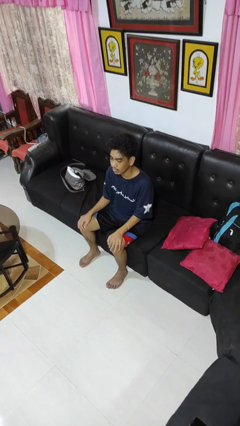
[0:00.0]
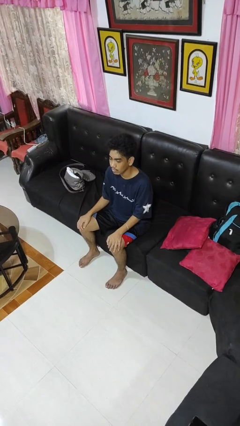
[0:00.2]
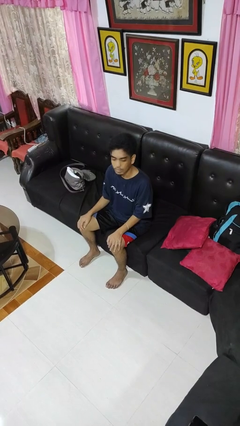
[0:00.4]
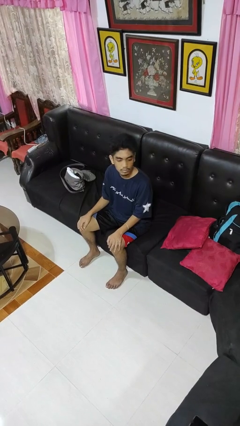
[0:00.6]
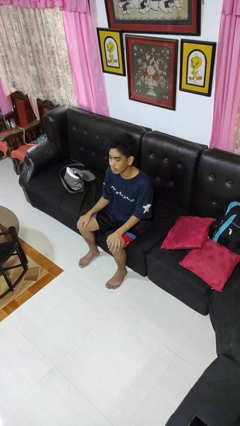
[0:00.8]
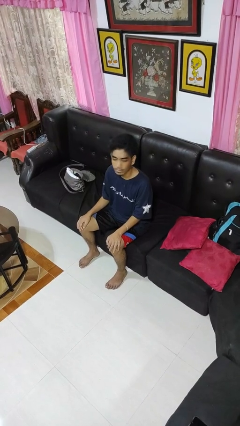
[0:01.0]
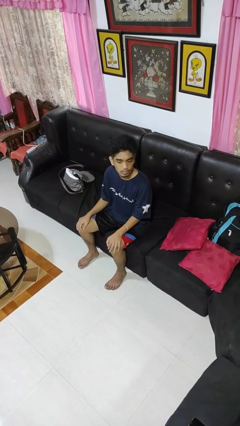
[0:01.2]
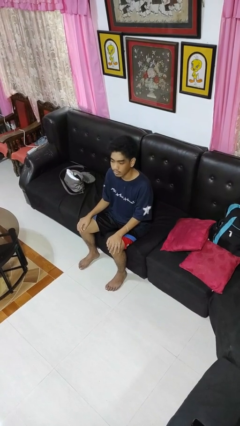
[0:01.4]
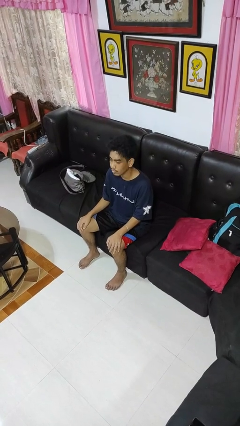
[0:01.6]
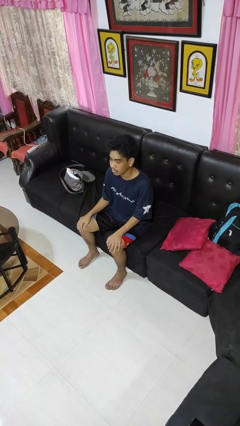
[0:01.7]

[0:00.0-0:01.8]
person shakes head

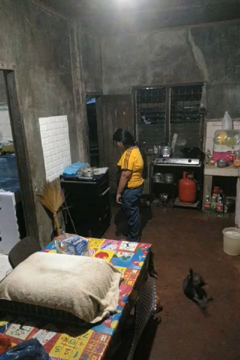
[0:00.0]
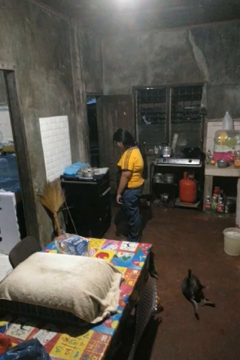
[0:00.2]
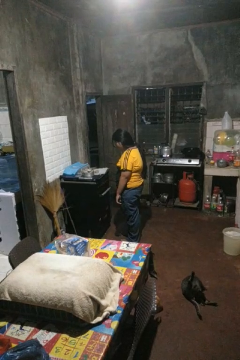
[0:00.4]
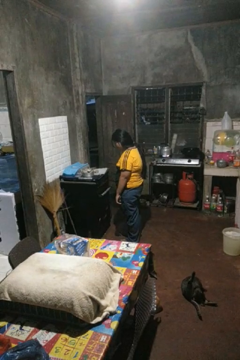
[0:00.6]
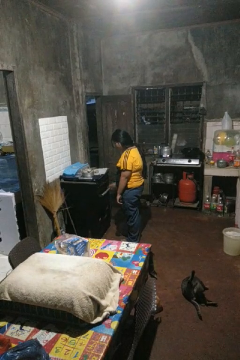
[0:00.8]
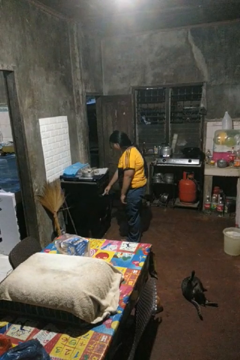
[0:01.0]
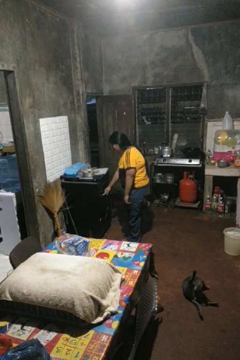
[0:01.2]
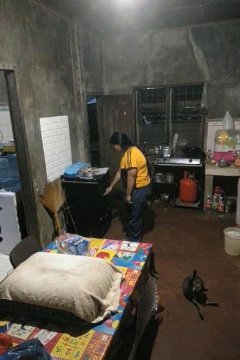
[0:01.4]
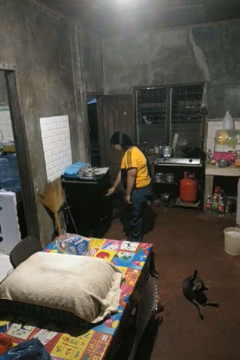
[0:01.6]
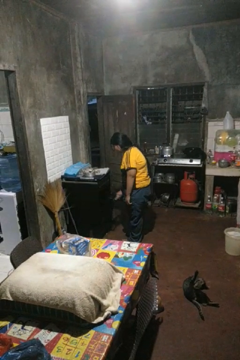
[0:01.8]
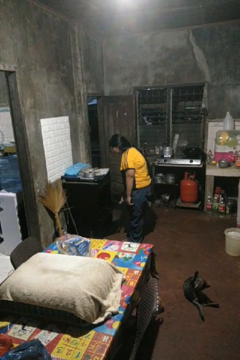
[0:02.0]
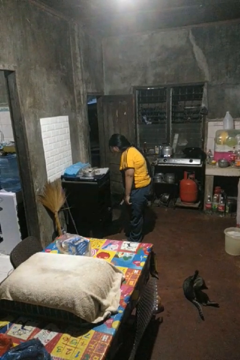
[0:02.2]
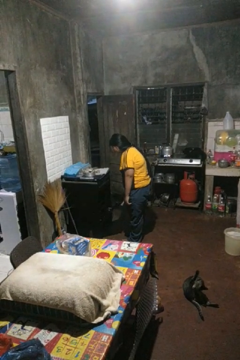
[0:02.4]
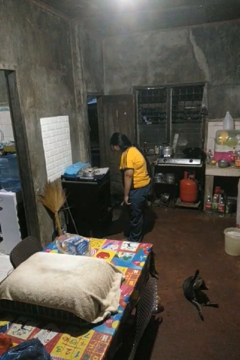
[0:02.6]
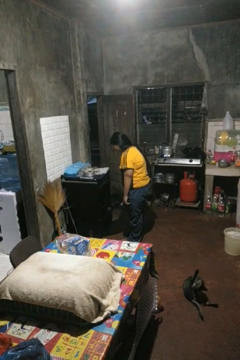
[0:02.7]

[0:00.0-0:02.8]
person opens oven door

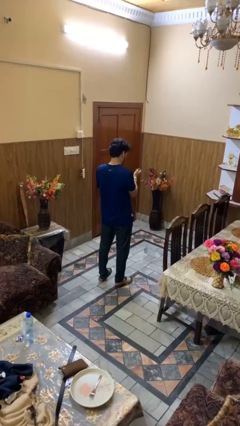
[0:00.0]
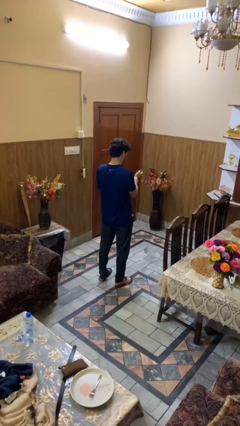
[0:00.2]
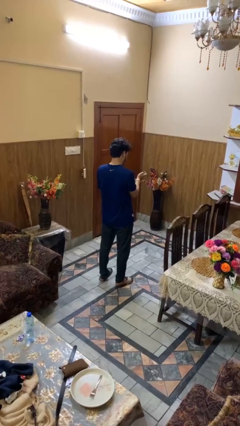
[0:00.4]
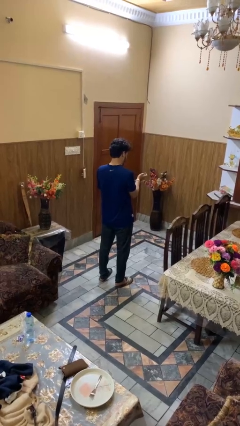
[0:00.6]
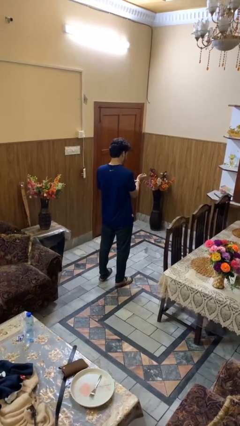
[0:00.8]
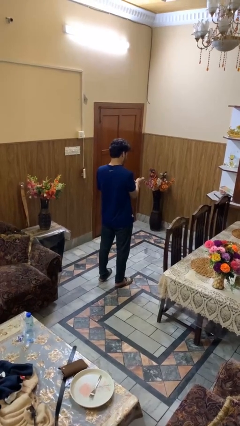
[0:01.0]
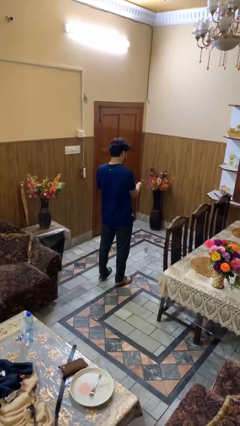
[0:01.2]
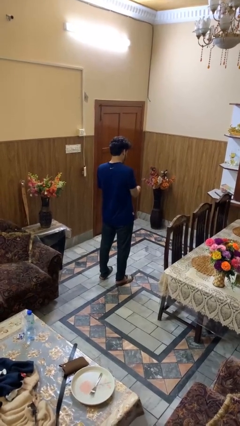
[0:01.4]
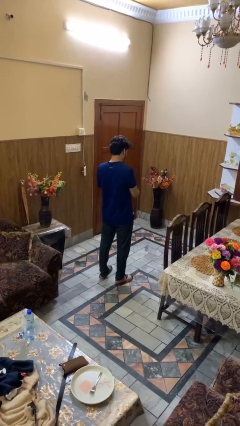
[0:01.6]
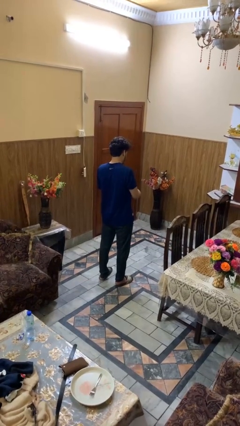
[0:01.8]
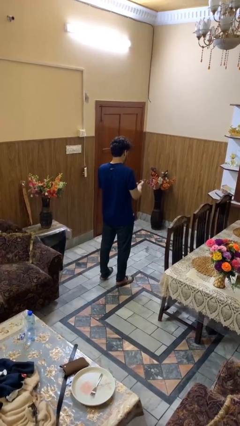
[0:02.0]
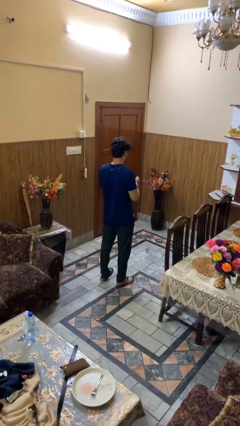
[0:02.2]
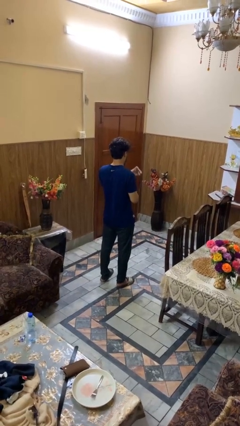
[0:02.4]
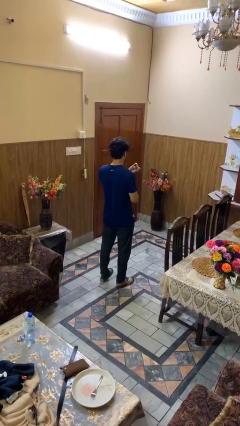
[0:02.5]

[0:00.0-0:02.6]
person takes off wristwatch

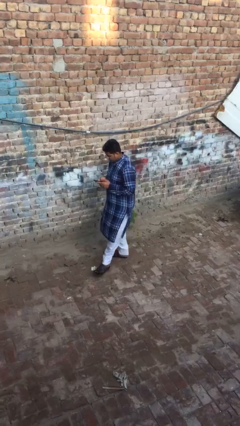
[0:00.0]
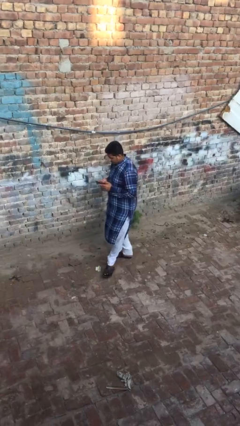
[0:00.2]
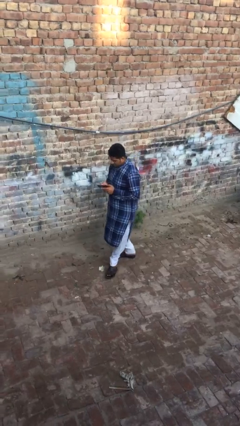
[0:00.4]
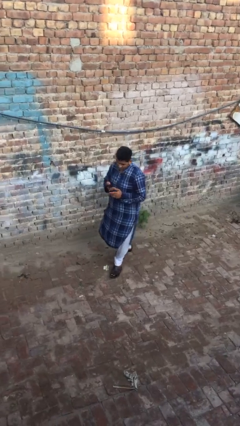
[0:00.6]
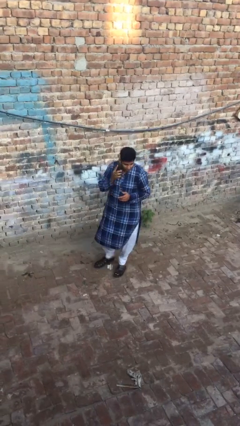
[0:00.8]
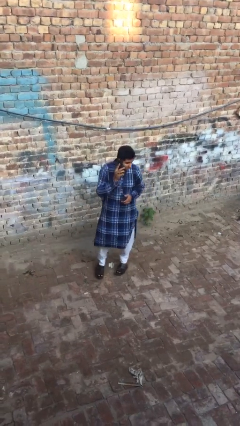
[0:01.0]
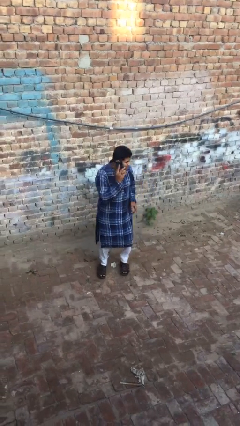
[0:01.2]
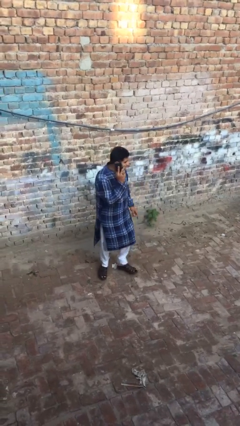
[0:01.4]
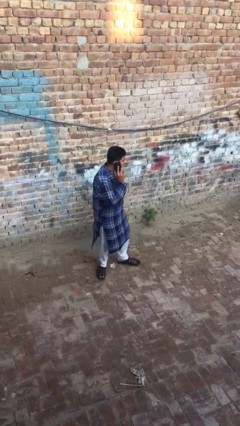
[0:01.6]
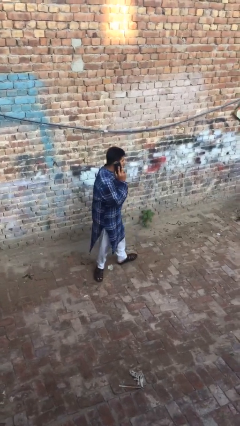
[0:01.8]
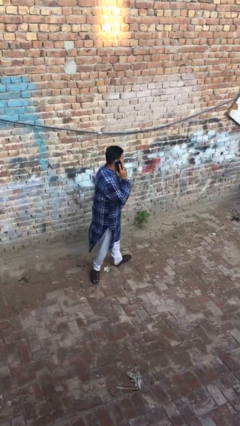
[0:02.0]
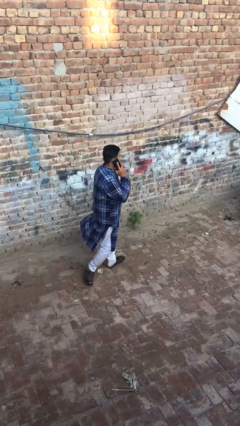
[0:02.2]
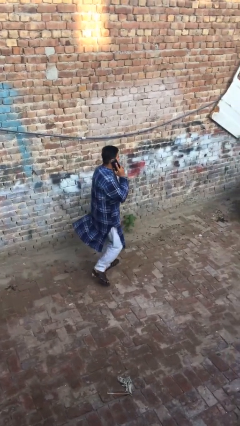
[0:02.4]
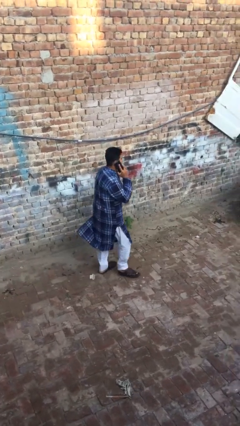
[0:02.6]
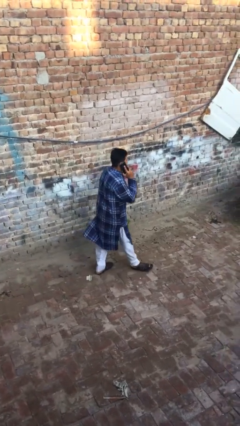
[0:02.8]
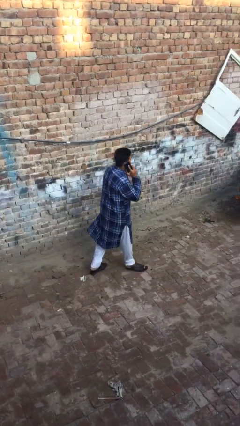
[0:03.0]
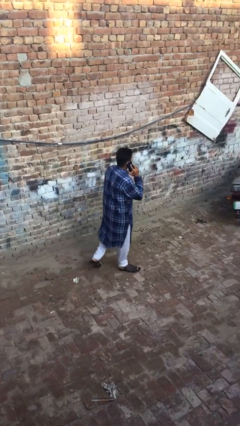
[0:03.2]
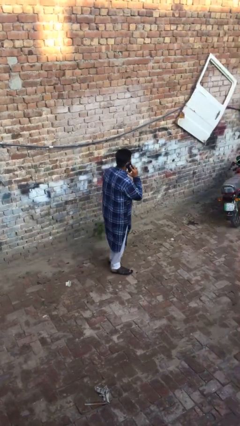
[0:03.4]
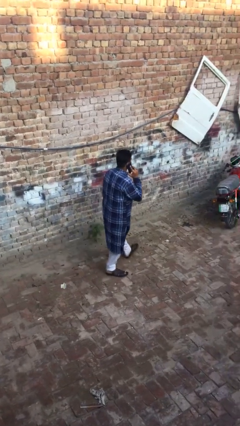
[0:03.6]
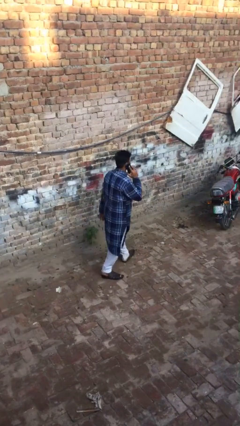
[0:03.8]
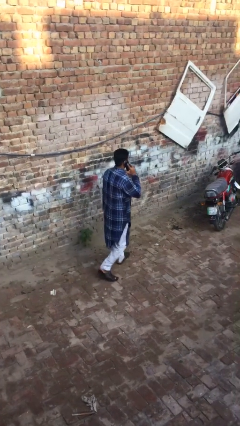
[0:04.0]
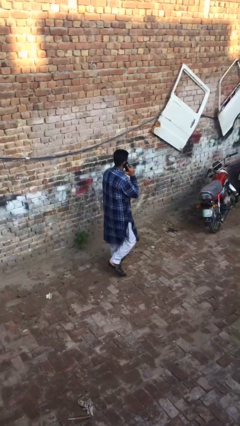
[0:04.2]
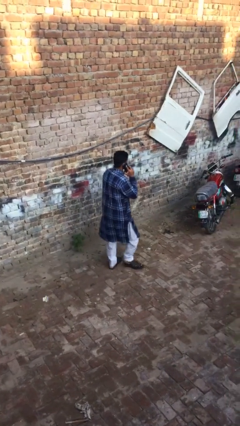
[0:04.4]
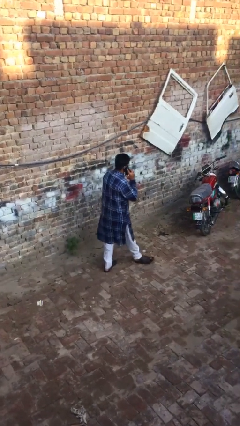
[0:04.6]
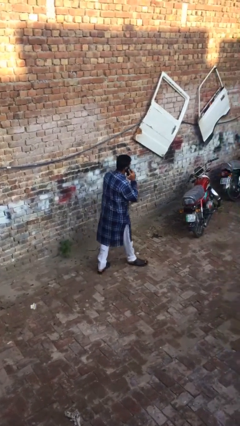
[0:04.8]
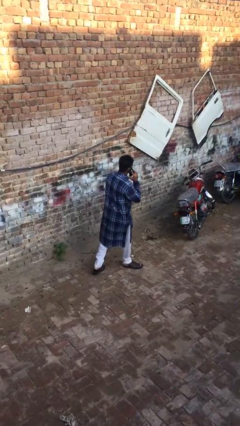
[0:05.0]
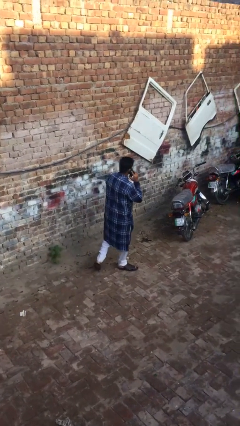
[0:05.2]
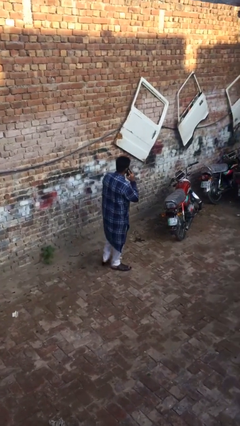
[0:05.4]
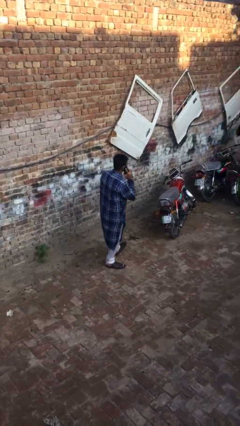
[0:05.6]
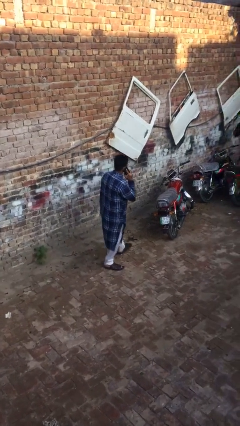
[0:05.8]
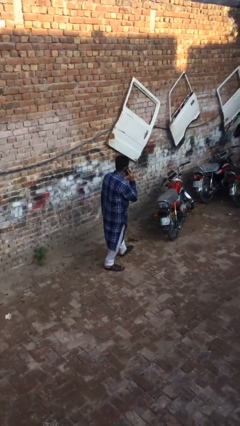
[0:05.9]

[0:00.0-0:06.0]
person talks on phone

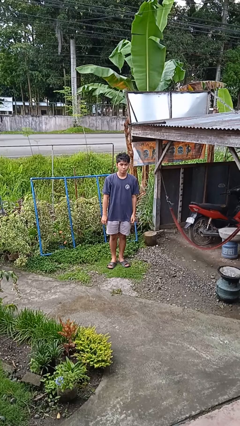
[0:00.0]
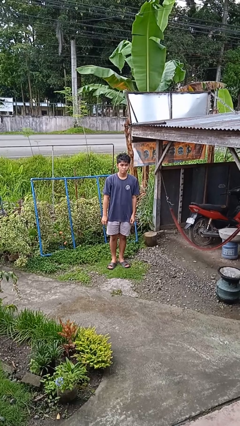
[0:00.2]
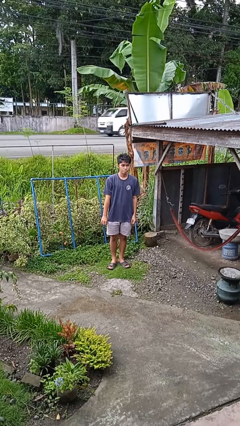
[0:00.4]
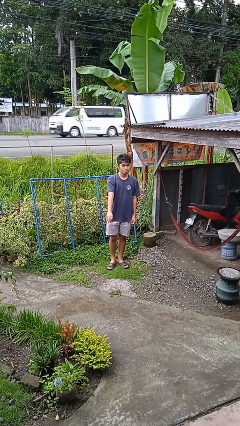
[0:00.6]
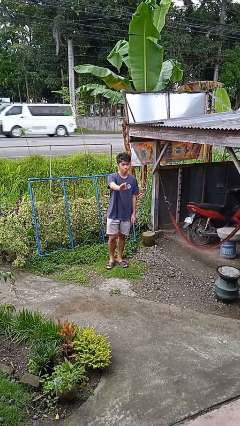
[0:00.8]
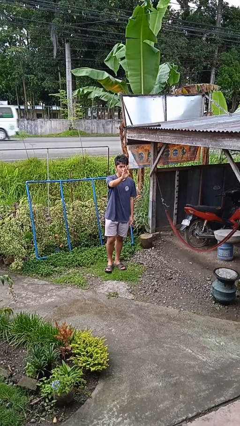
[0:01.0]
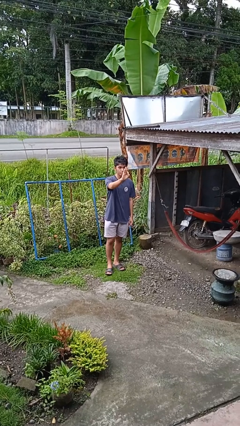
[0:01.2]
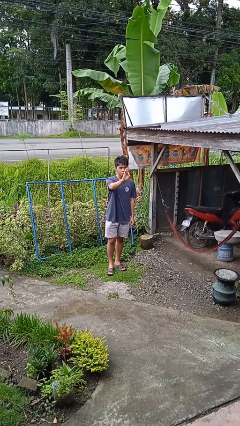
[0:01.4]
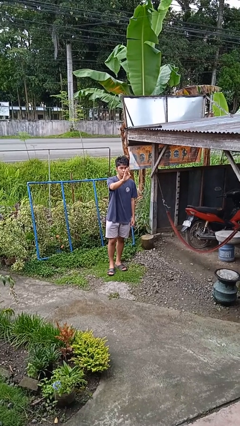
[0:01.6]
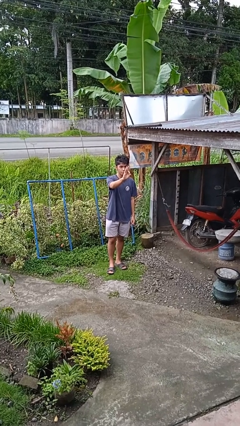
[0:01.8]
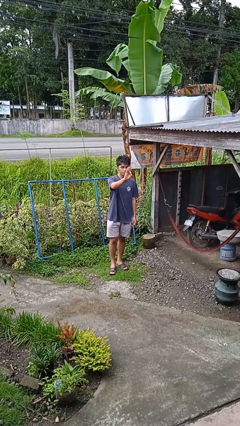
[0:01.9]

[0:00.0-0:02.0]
person gestures number three

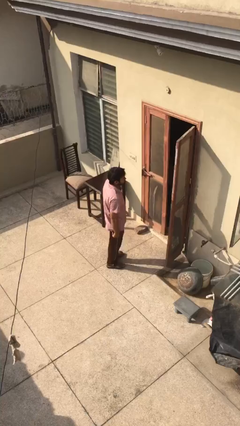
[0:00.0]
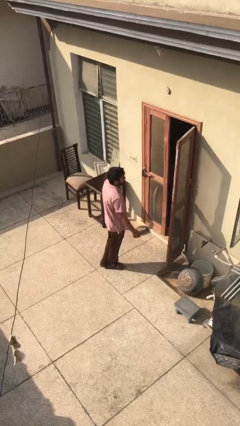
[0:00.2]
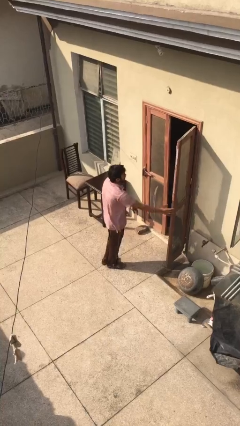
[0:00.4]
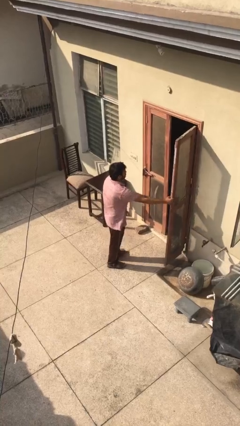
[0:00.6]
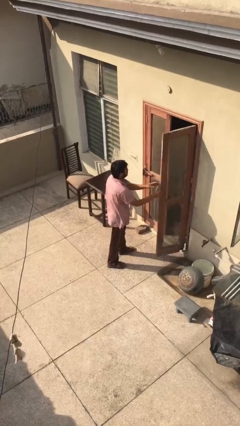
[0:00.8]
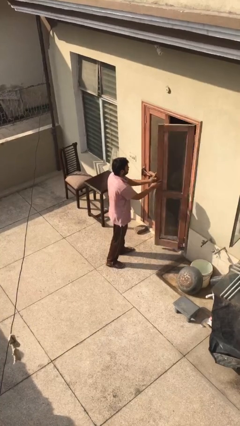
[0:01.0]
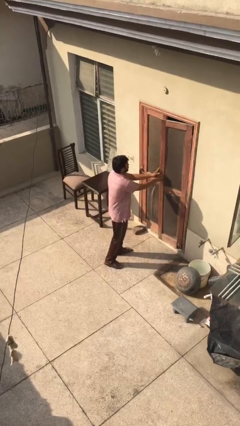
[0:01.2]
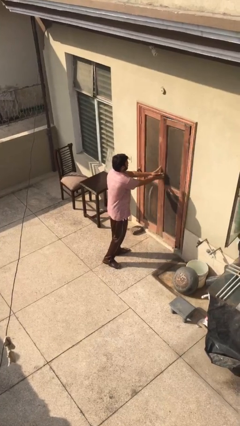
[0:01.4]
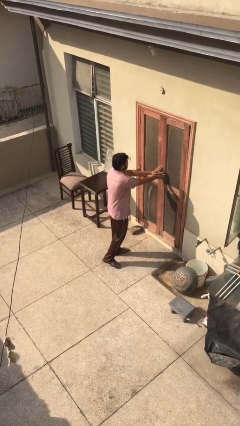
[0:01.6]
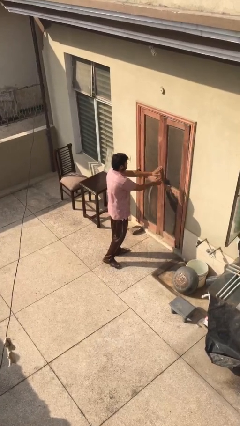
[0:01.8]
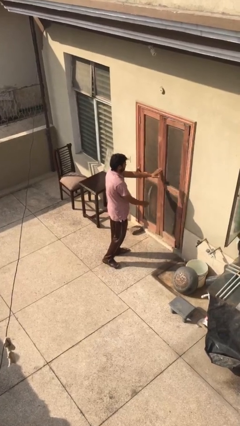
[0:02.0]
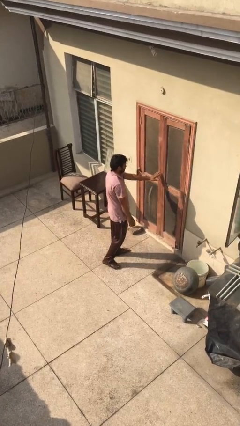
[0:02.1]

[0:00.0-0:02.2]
person closes facility door
